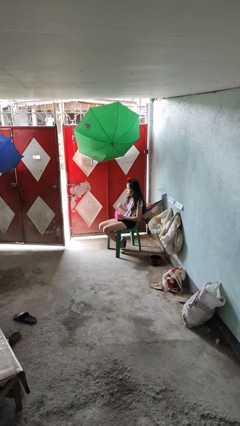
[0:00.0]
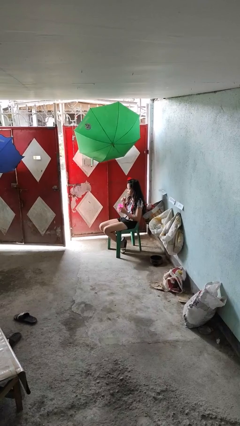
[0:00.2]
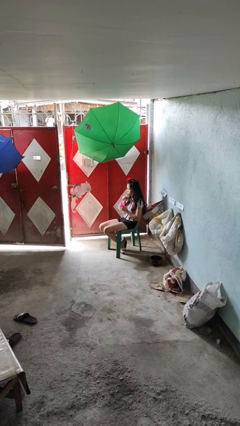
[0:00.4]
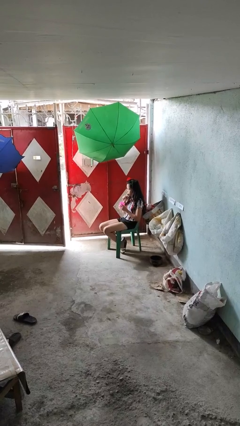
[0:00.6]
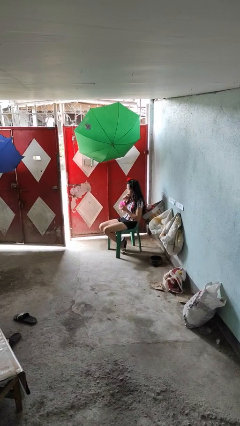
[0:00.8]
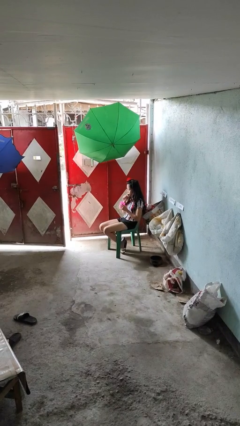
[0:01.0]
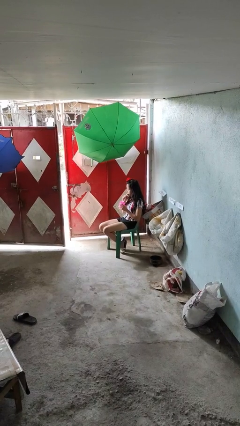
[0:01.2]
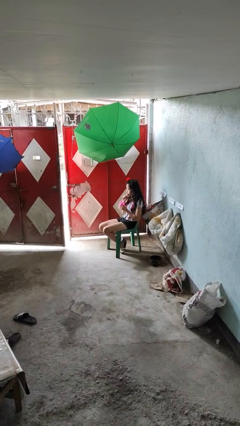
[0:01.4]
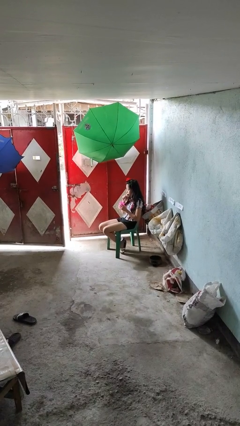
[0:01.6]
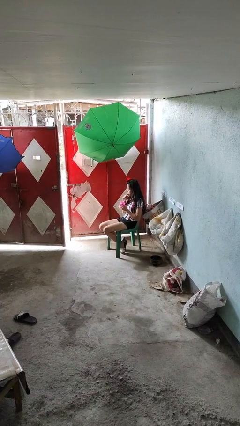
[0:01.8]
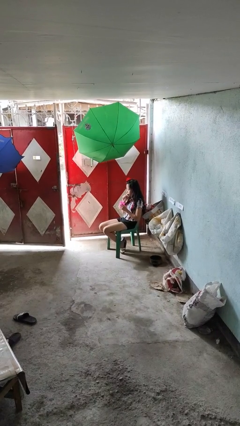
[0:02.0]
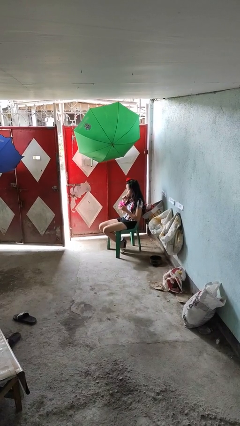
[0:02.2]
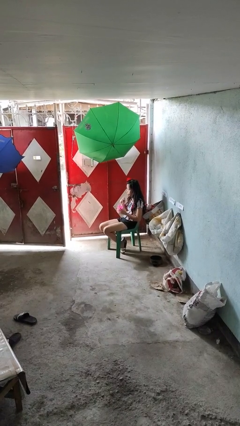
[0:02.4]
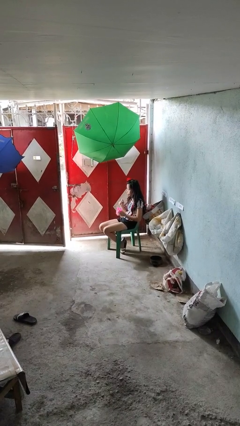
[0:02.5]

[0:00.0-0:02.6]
person drinks from straw

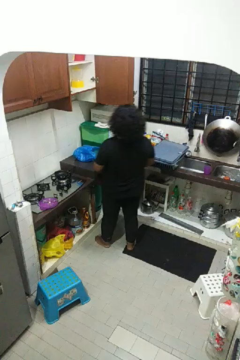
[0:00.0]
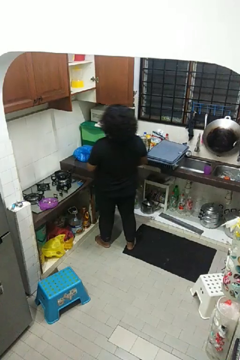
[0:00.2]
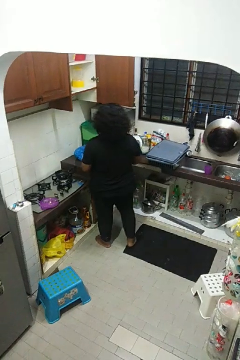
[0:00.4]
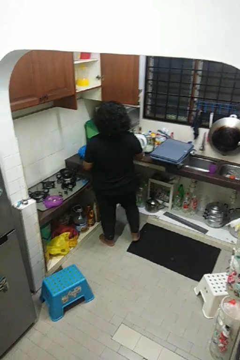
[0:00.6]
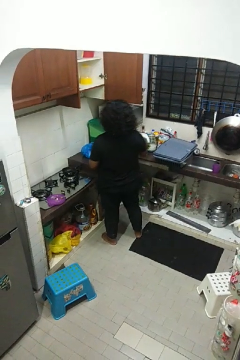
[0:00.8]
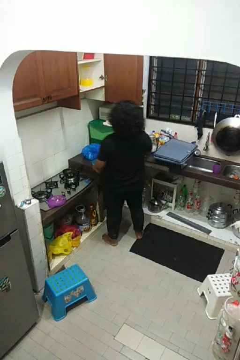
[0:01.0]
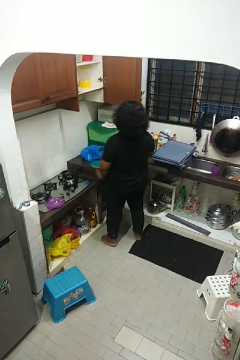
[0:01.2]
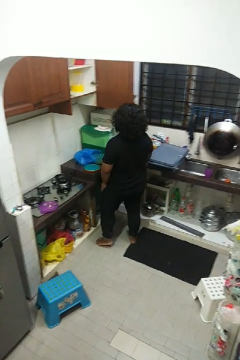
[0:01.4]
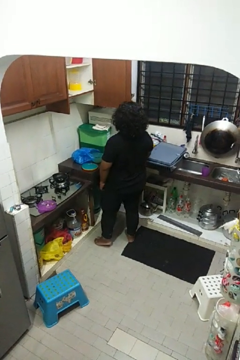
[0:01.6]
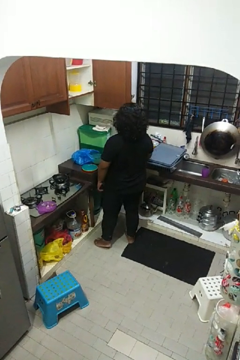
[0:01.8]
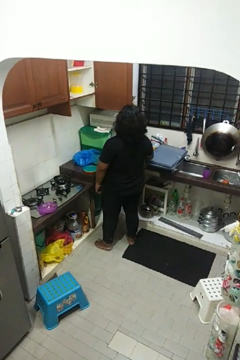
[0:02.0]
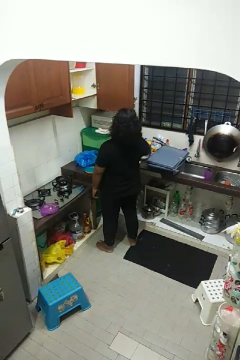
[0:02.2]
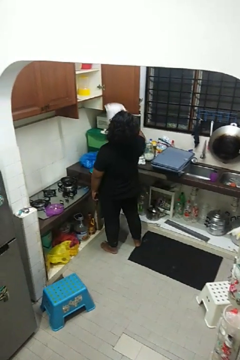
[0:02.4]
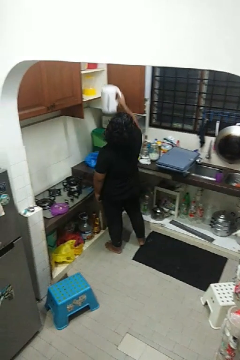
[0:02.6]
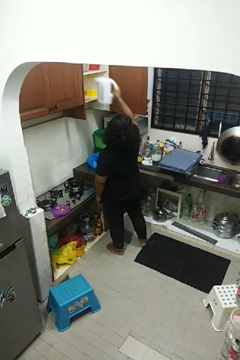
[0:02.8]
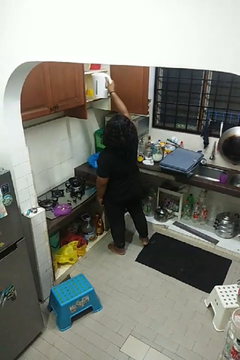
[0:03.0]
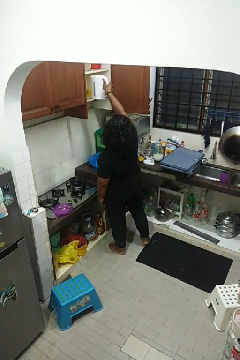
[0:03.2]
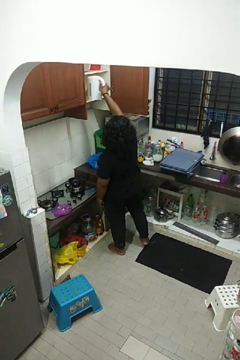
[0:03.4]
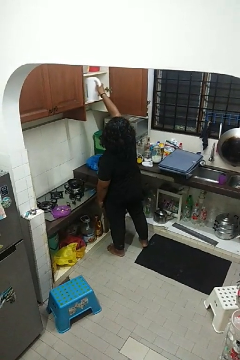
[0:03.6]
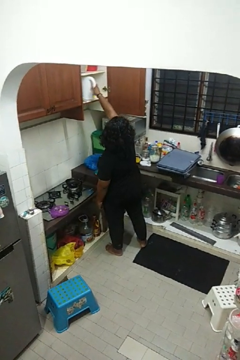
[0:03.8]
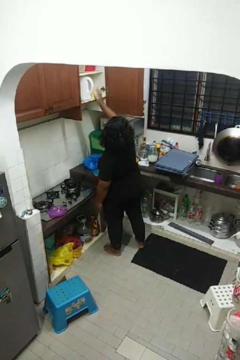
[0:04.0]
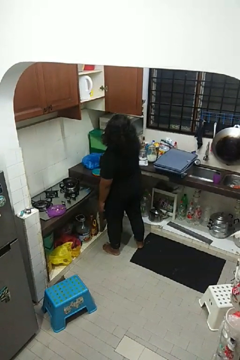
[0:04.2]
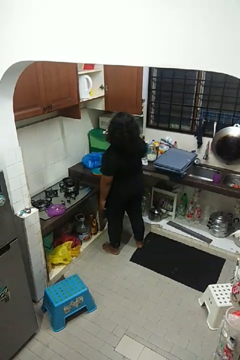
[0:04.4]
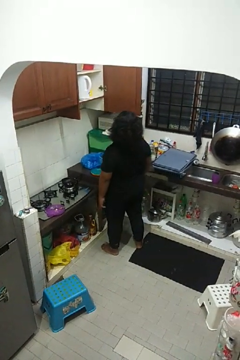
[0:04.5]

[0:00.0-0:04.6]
person puts object in cabinet

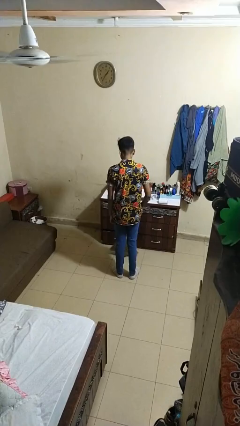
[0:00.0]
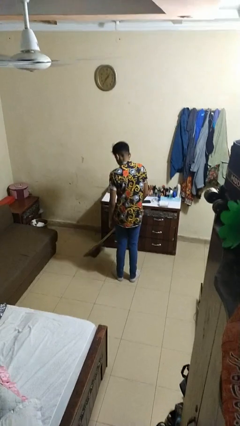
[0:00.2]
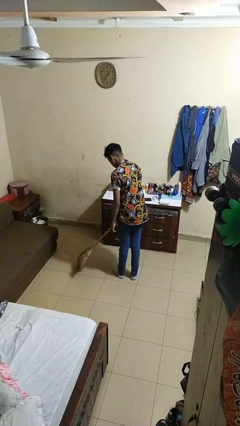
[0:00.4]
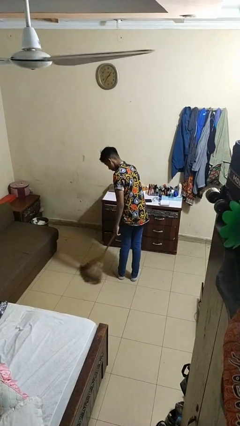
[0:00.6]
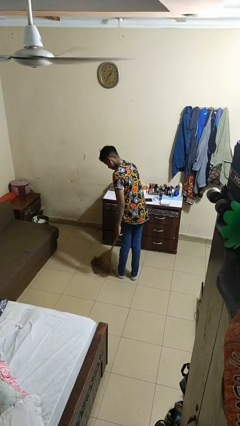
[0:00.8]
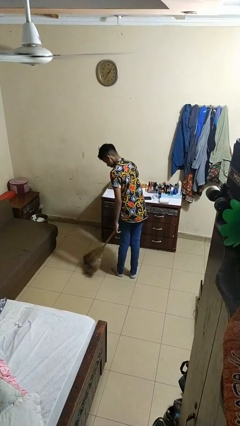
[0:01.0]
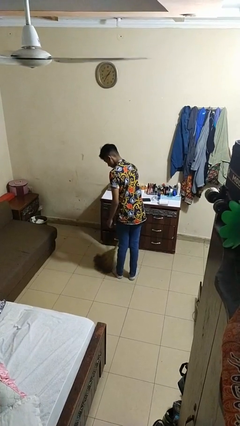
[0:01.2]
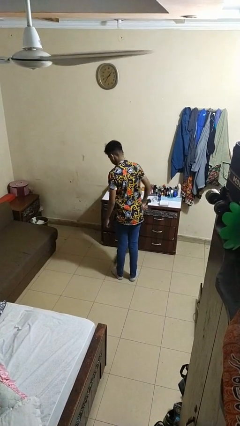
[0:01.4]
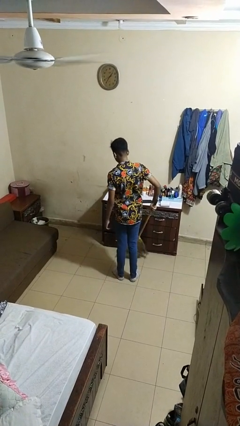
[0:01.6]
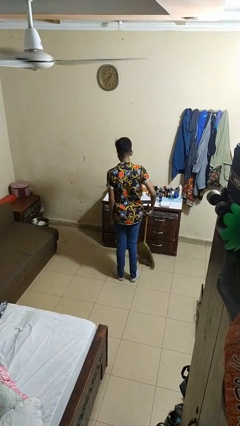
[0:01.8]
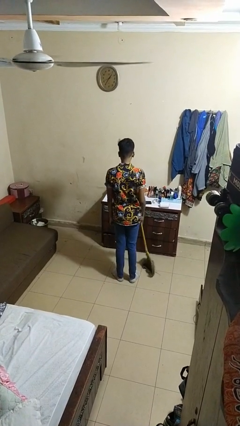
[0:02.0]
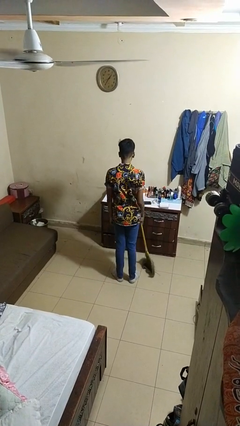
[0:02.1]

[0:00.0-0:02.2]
person sweeps floor

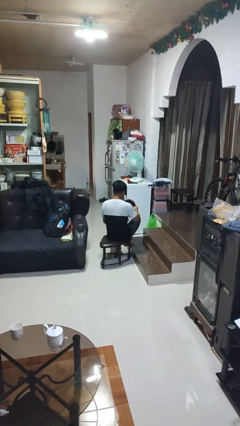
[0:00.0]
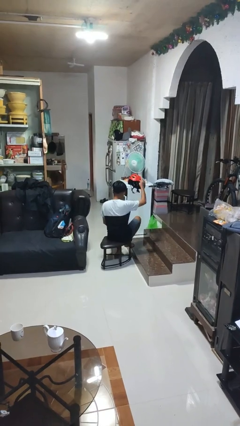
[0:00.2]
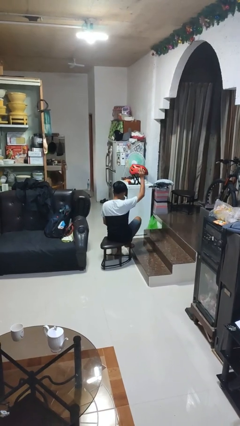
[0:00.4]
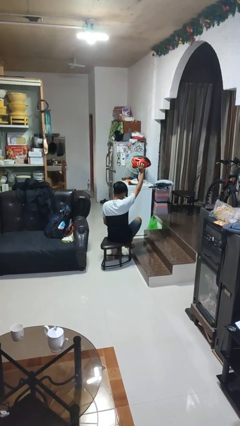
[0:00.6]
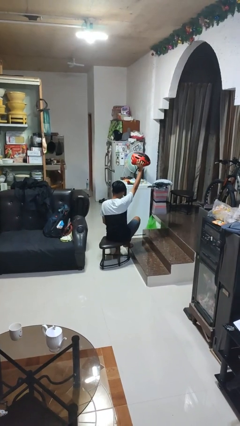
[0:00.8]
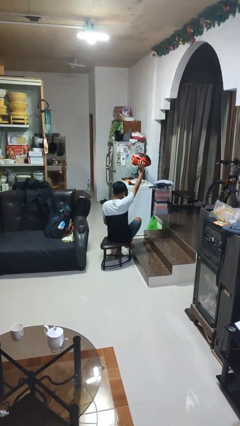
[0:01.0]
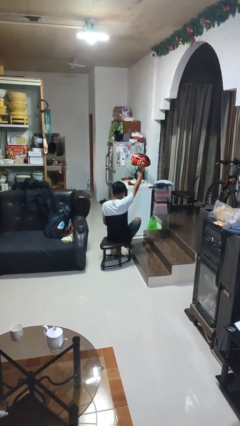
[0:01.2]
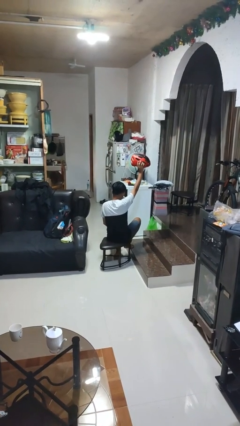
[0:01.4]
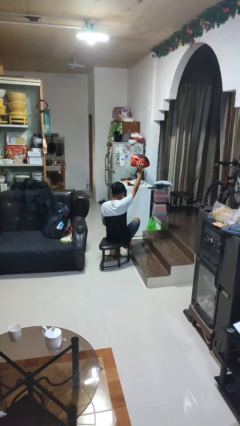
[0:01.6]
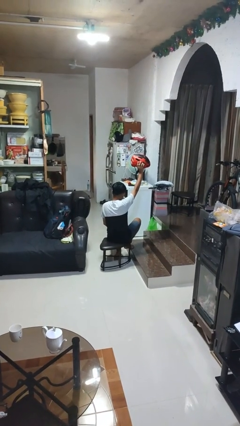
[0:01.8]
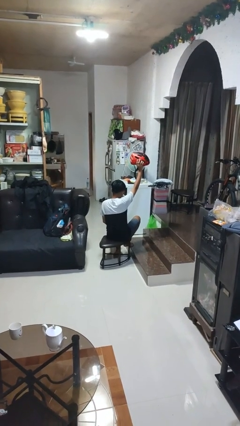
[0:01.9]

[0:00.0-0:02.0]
person holds object above head

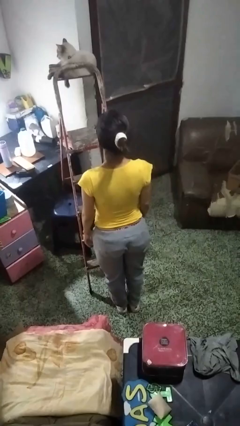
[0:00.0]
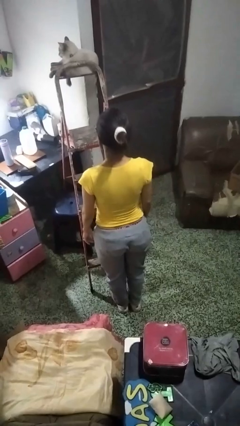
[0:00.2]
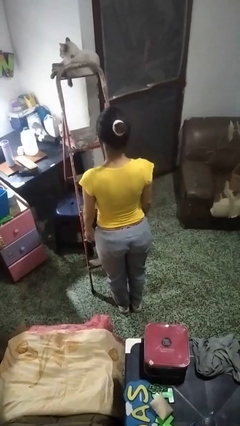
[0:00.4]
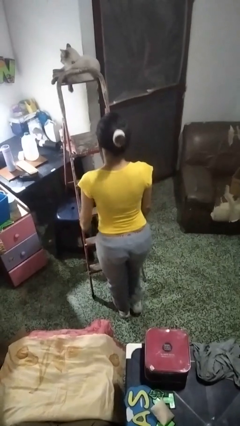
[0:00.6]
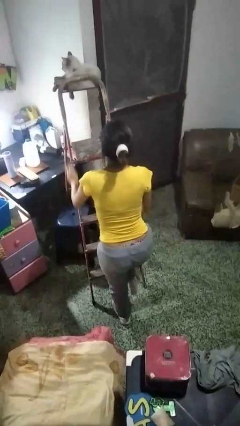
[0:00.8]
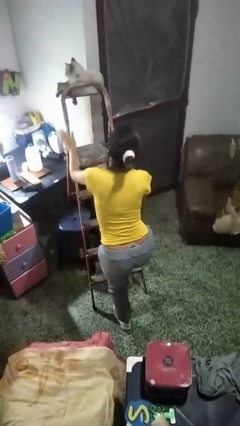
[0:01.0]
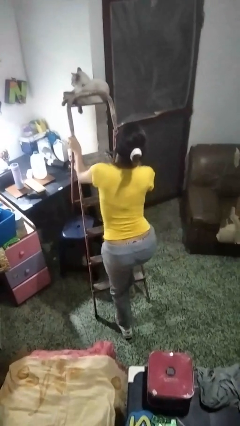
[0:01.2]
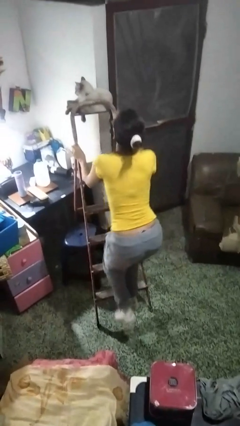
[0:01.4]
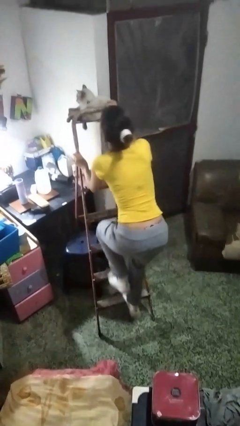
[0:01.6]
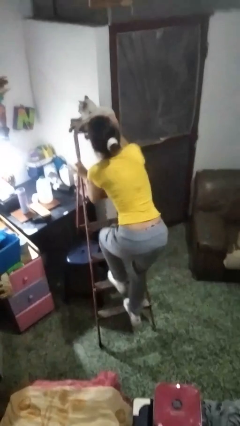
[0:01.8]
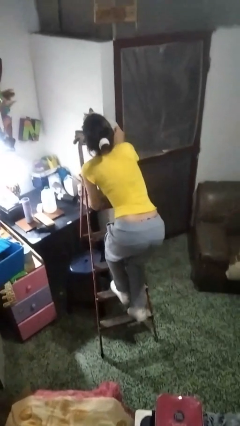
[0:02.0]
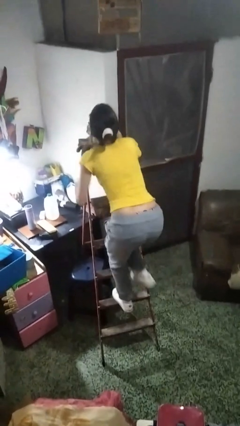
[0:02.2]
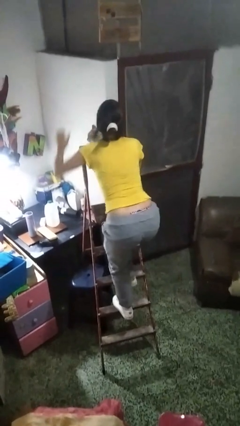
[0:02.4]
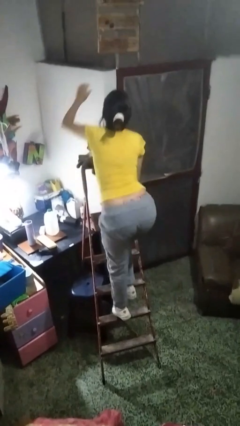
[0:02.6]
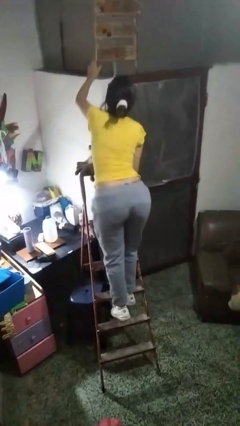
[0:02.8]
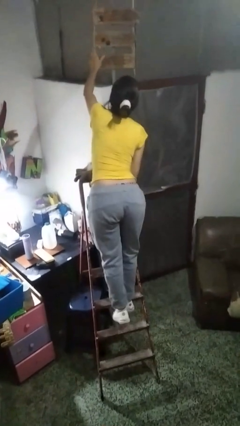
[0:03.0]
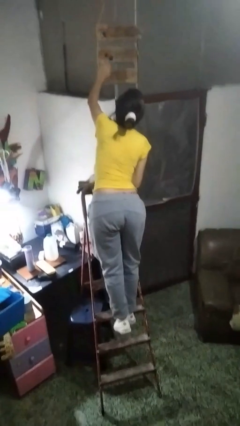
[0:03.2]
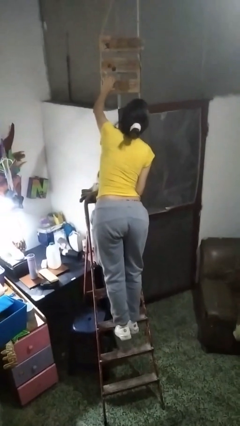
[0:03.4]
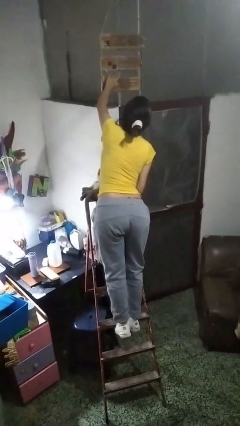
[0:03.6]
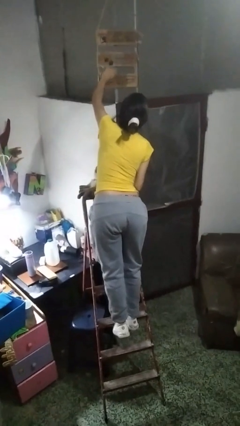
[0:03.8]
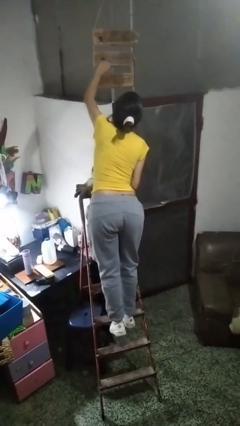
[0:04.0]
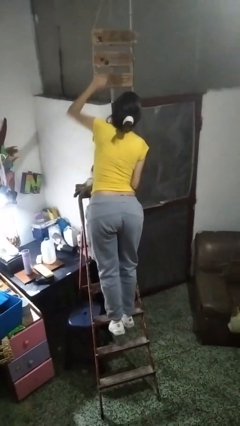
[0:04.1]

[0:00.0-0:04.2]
person climbs up ladder

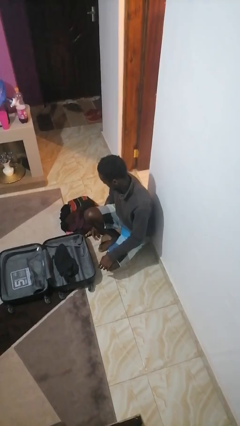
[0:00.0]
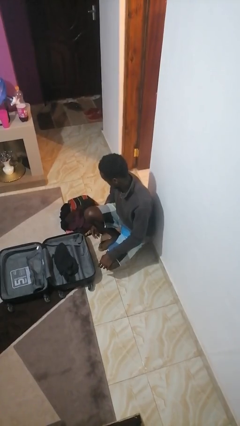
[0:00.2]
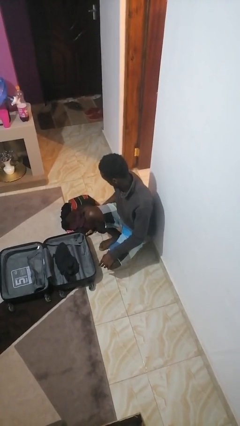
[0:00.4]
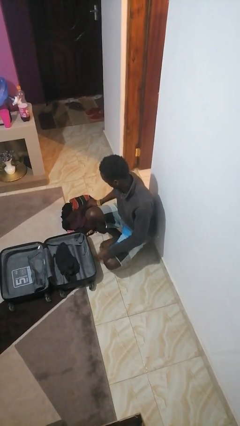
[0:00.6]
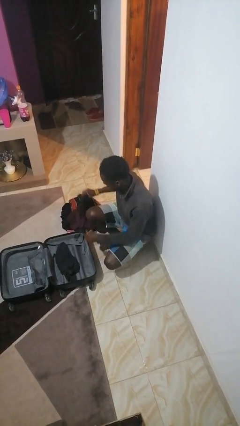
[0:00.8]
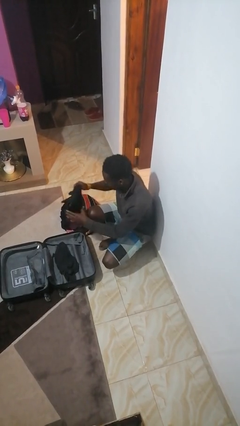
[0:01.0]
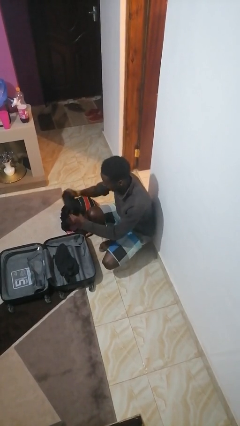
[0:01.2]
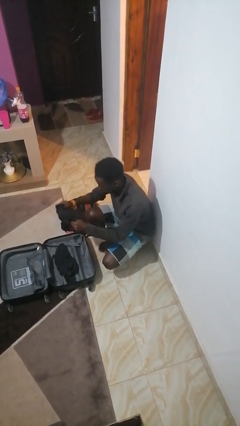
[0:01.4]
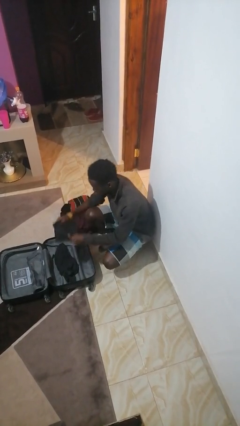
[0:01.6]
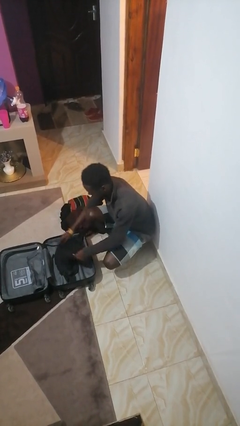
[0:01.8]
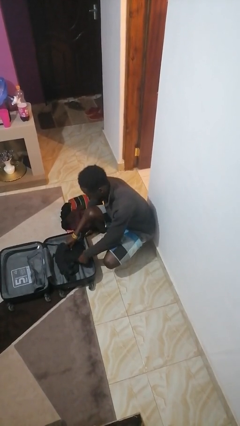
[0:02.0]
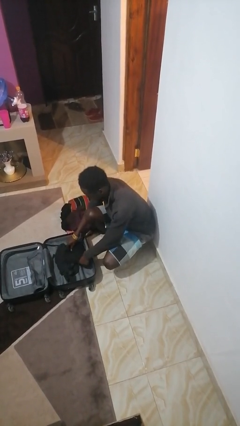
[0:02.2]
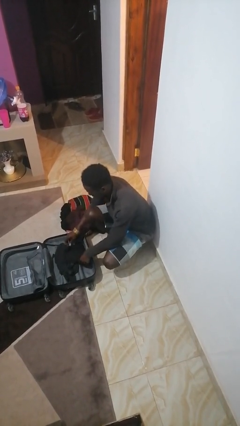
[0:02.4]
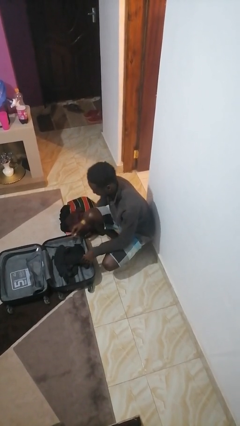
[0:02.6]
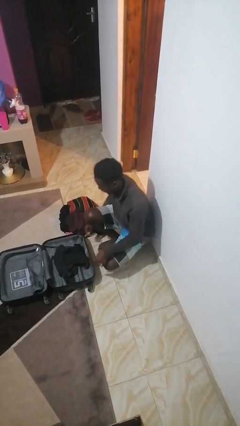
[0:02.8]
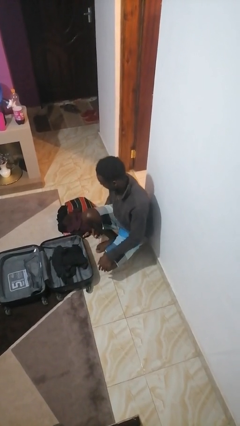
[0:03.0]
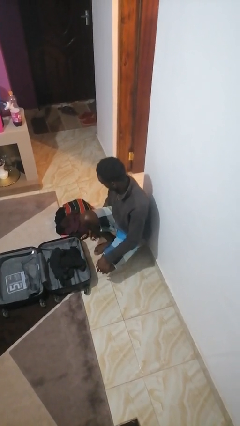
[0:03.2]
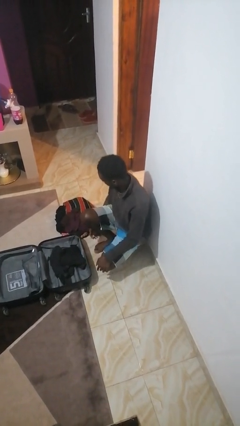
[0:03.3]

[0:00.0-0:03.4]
person loads clothes into suitcase
